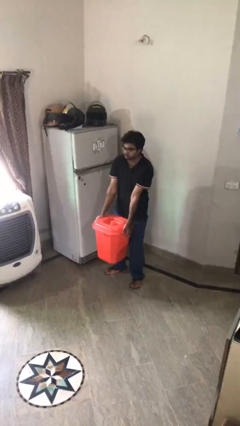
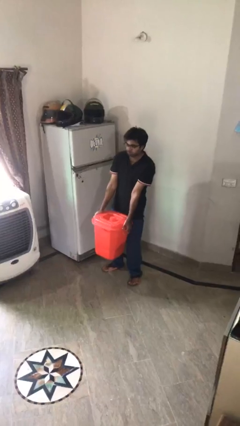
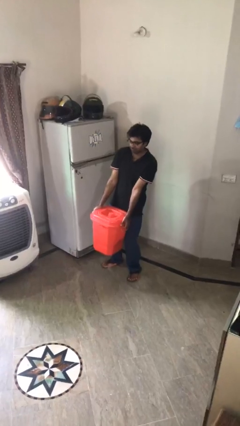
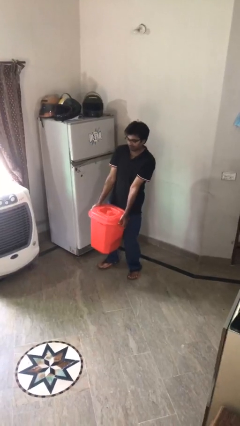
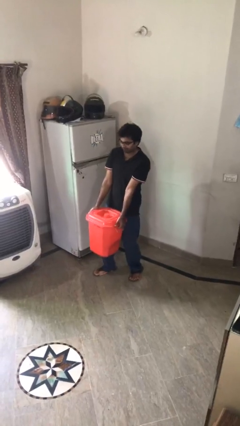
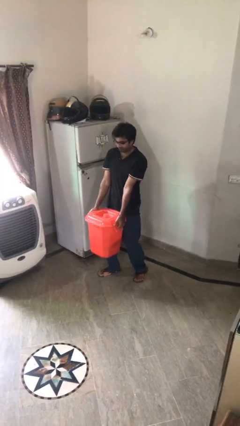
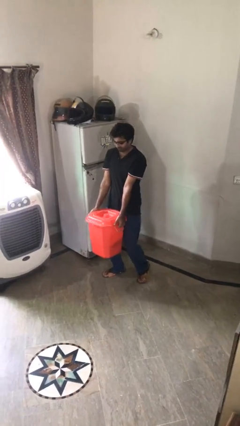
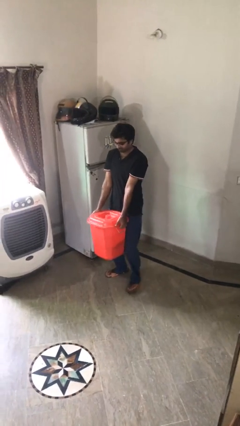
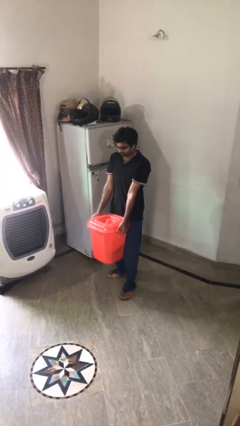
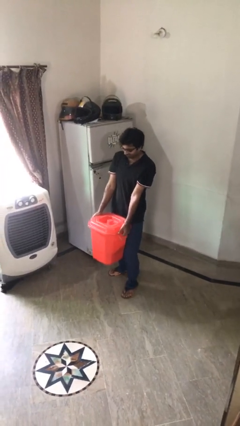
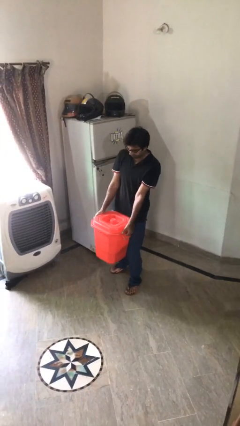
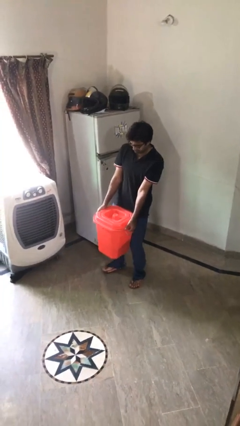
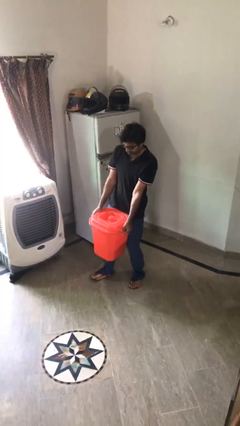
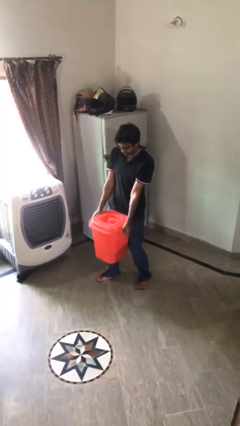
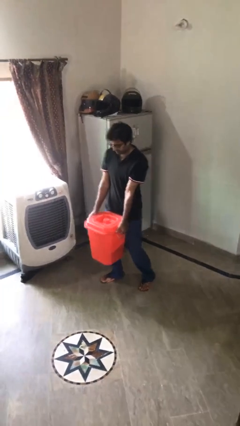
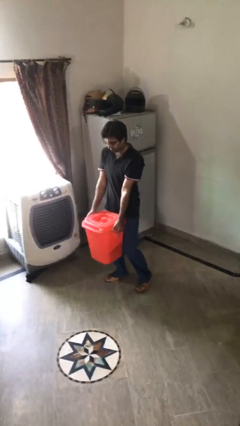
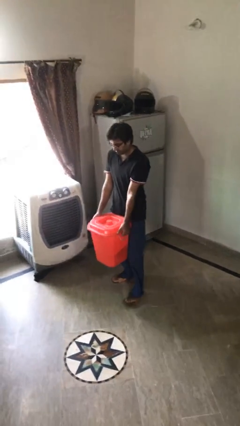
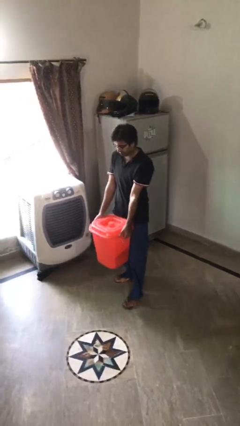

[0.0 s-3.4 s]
person carries heavy object

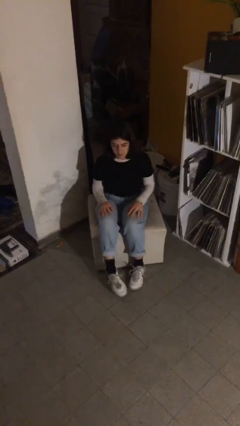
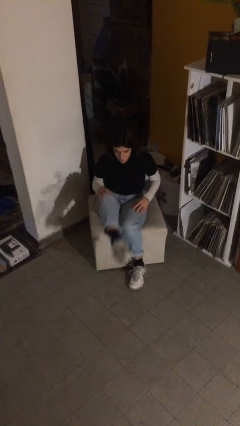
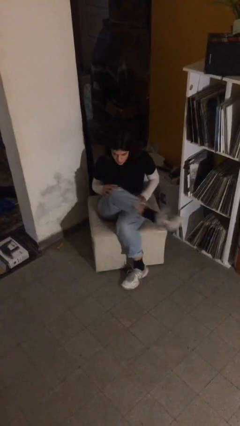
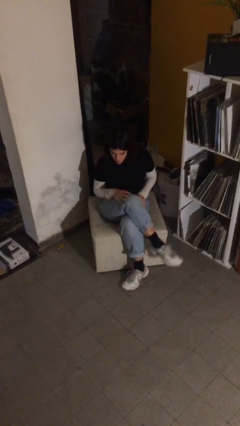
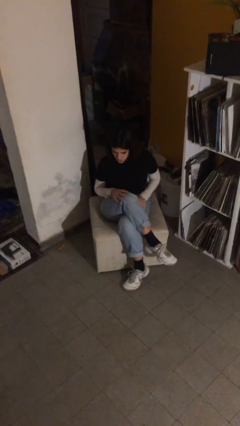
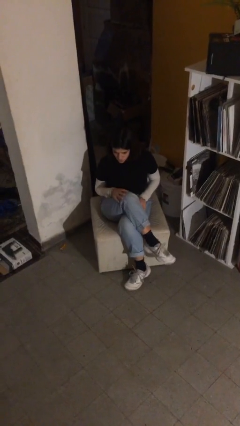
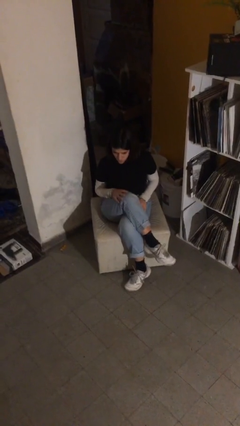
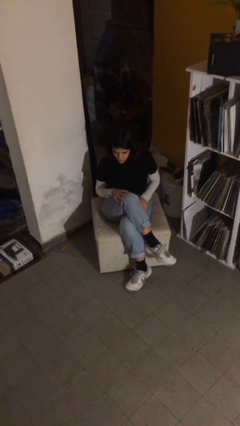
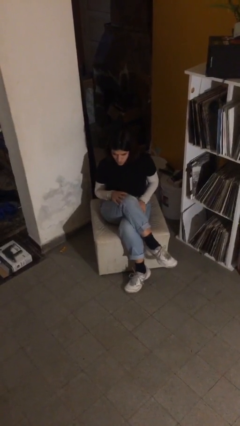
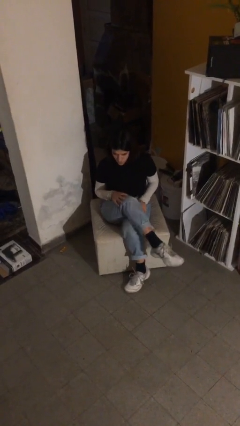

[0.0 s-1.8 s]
person crosses legs

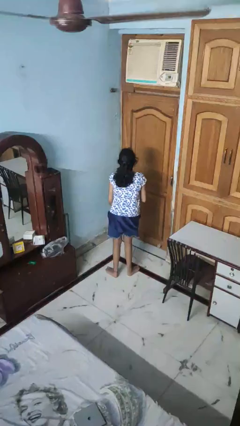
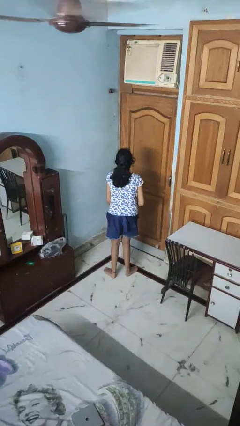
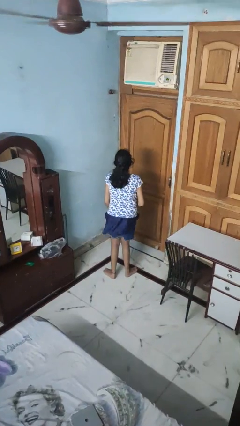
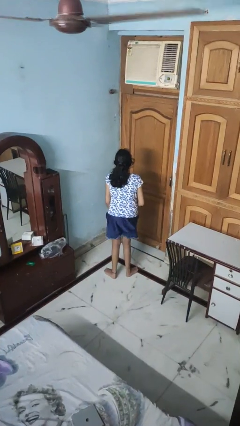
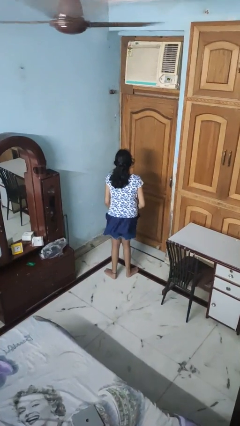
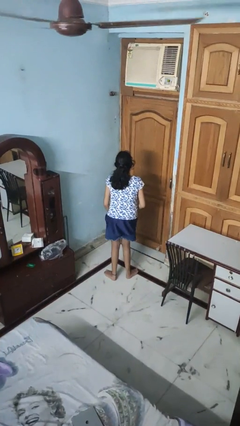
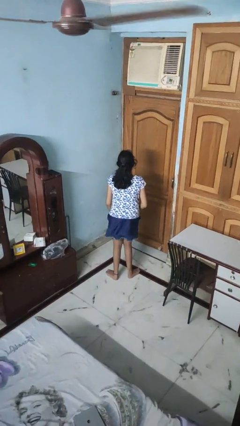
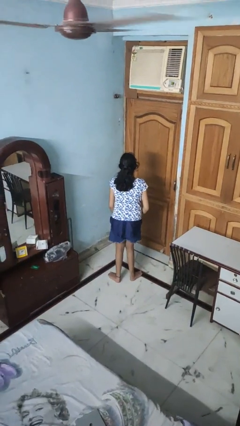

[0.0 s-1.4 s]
person wiggles hips

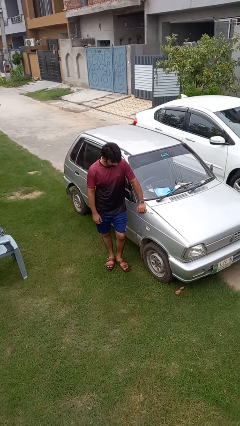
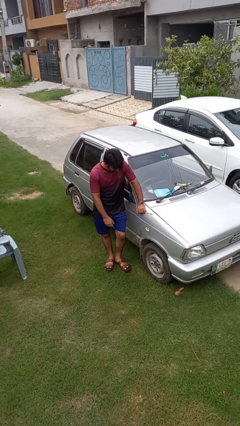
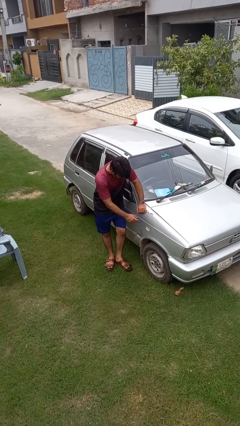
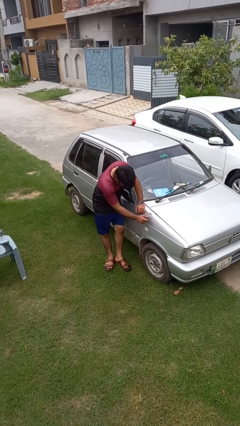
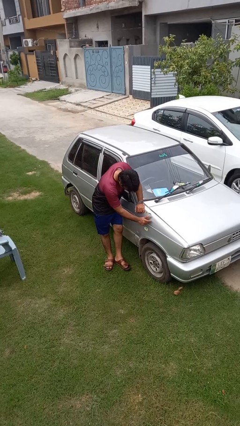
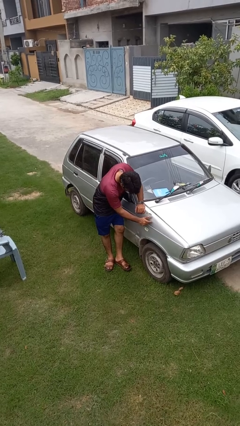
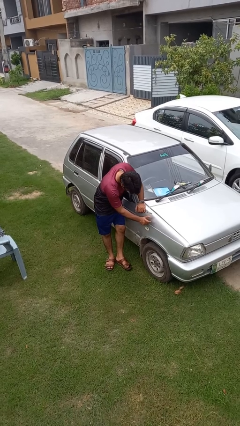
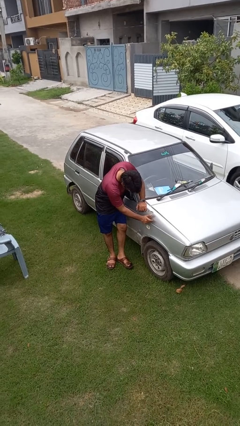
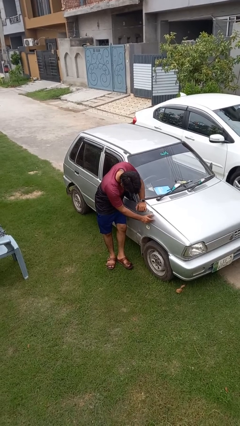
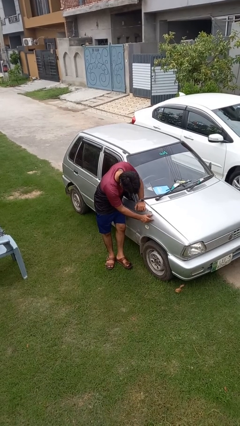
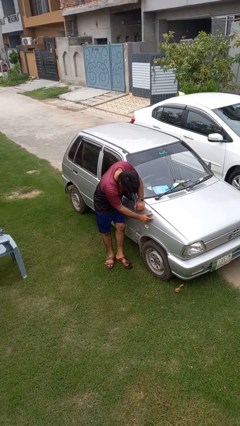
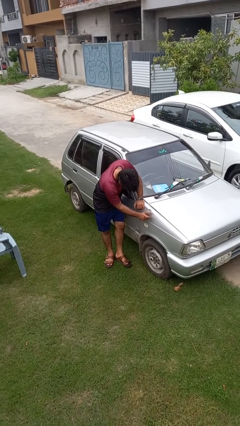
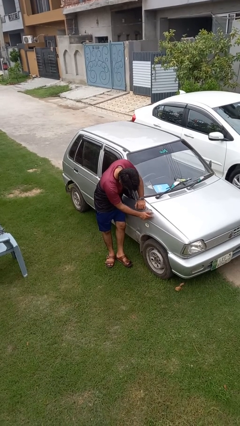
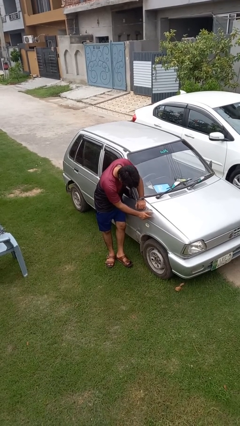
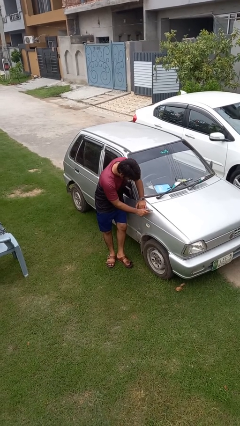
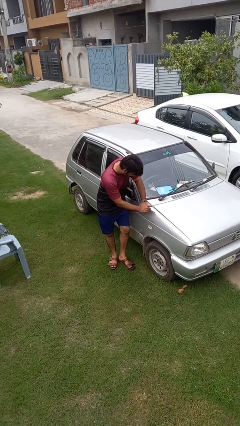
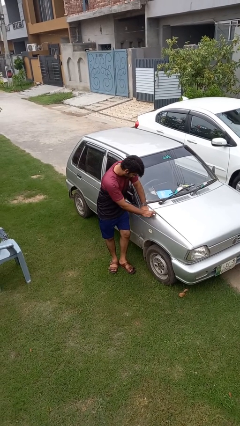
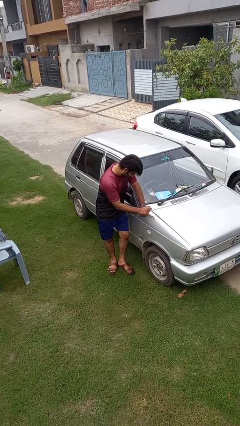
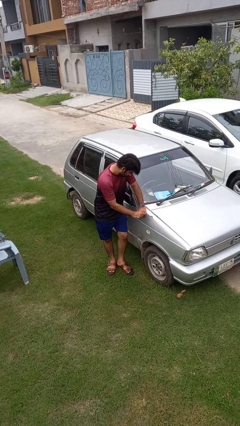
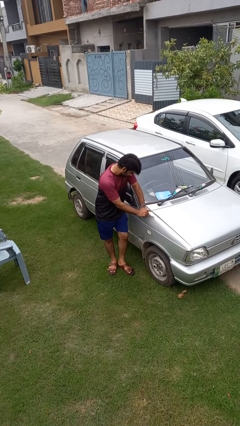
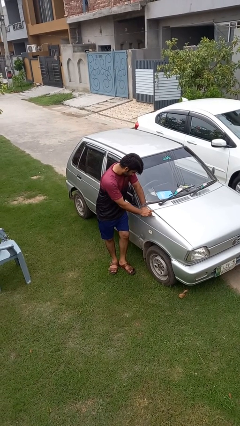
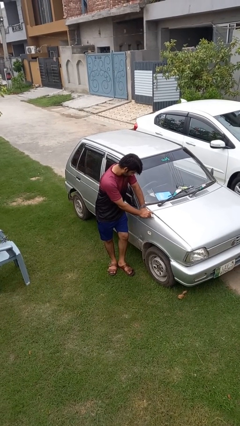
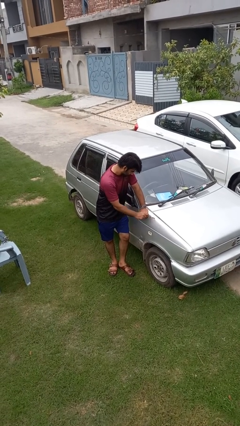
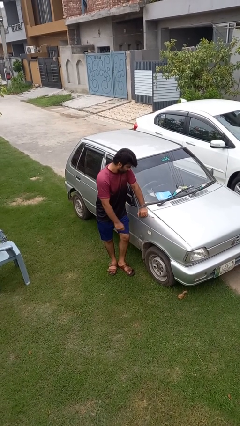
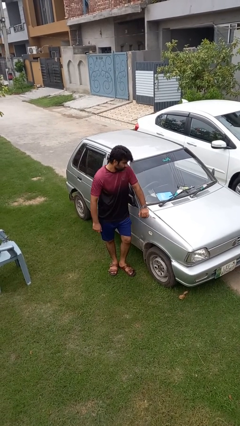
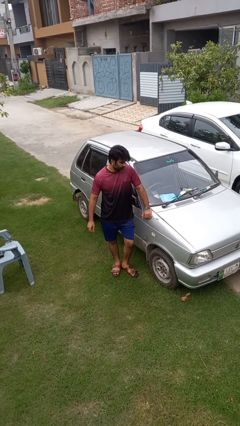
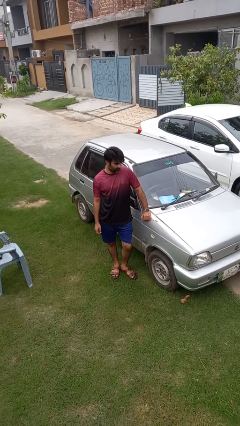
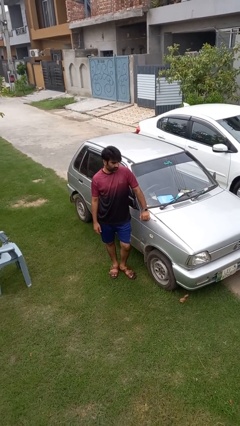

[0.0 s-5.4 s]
person taps object with finger

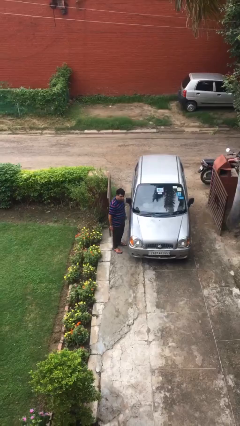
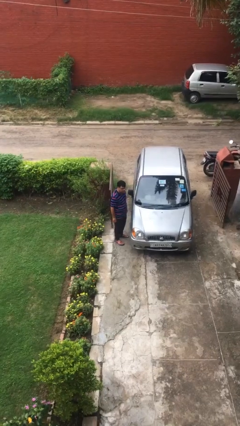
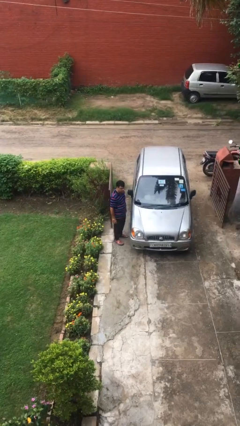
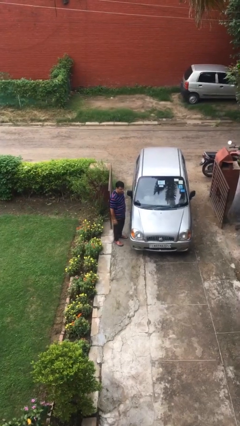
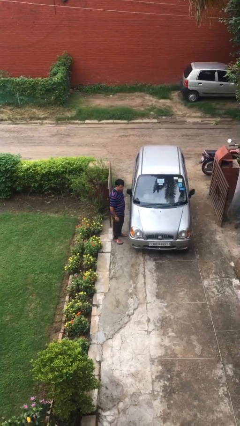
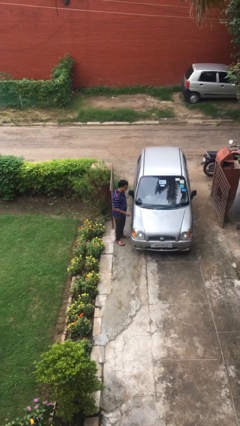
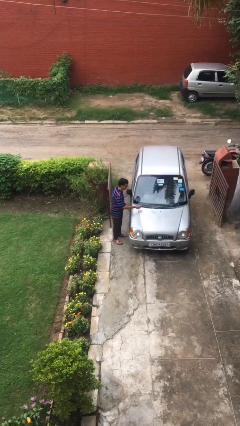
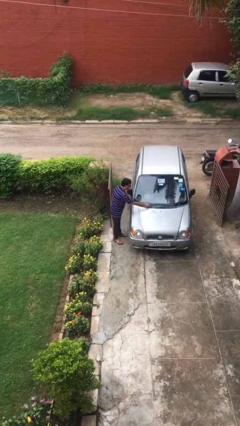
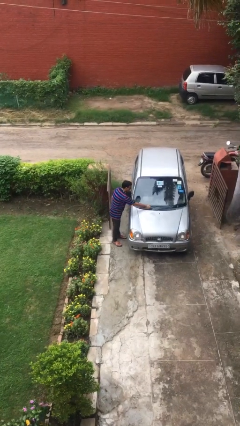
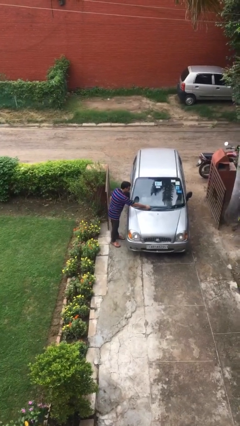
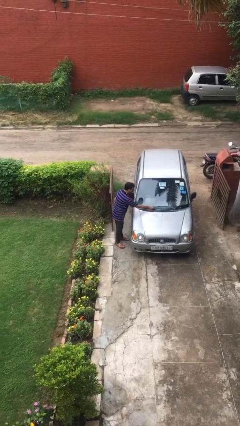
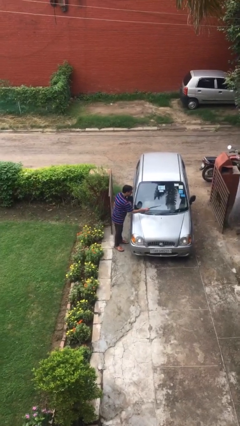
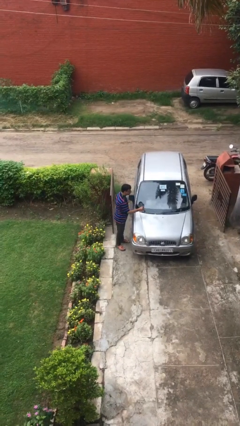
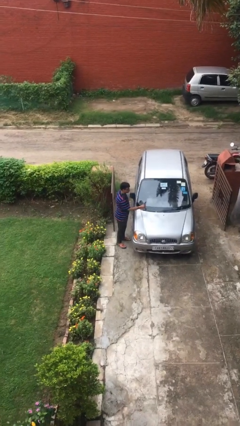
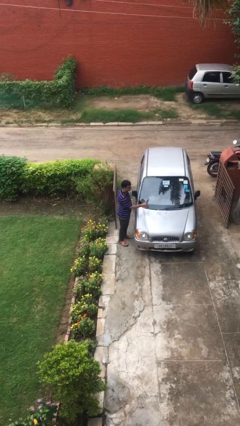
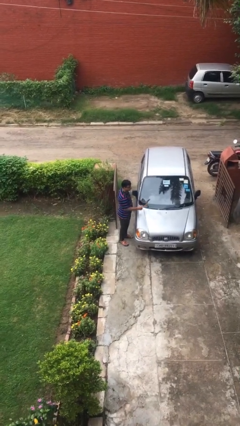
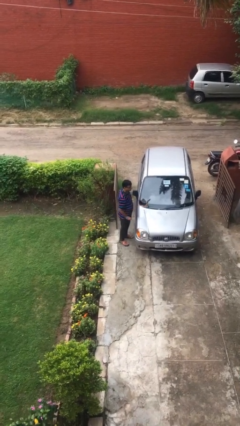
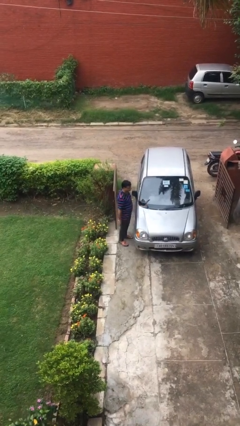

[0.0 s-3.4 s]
person flips up car wipers

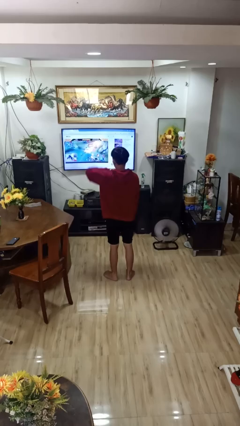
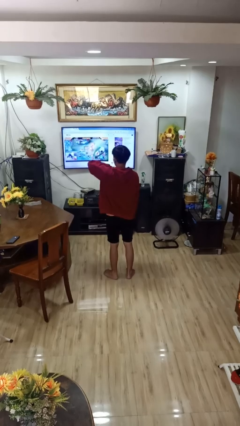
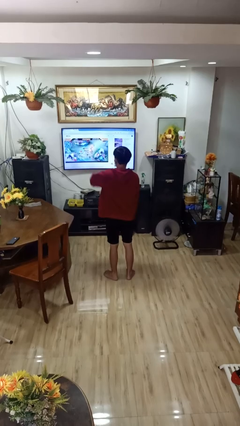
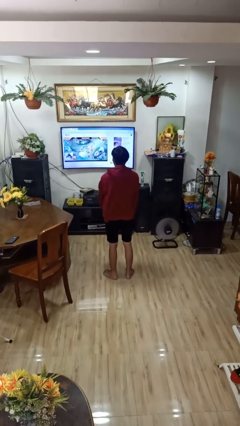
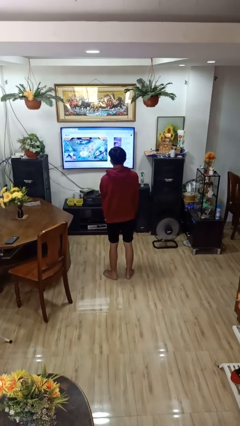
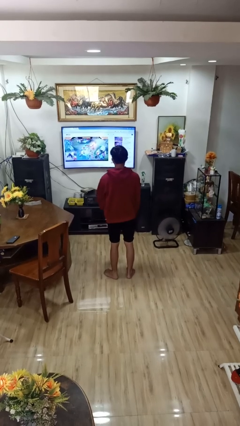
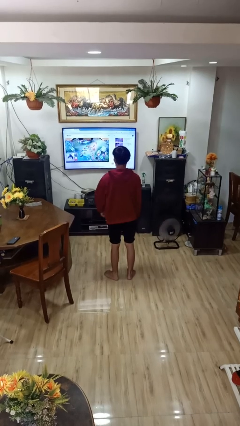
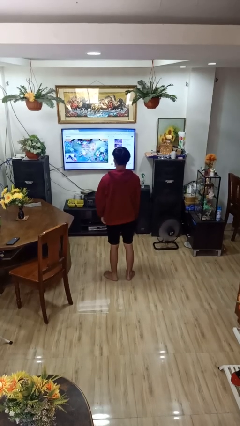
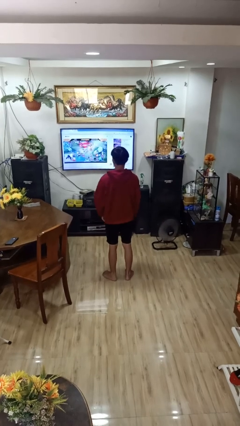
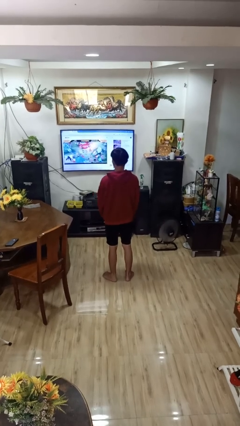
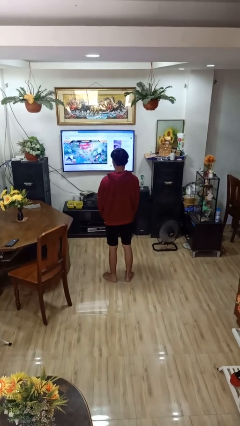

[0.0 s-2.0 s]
person unzips jacket

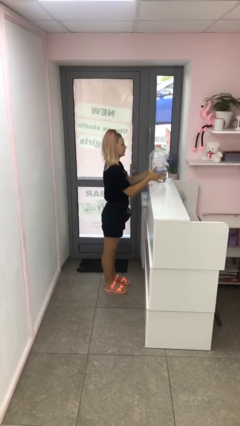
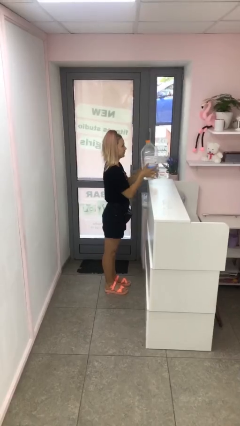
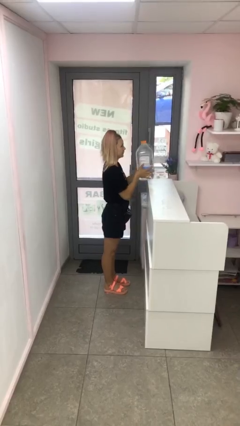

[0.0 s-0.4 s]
person picks up object from countertop
